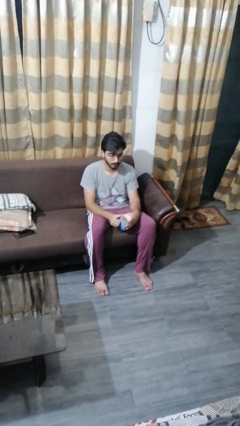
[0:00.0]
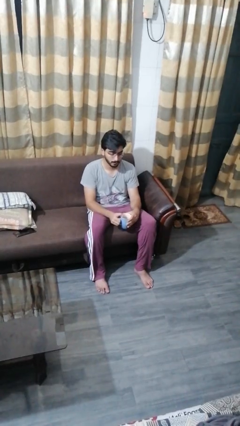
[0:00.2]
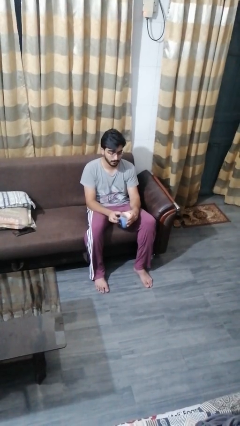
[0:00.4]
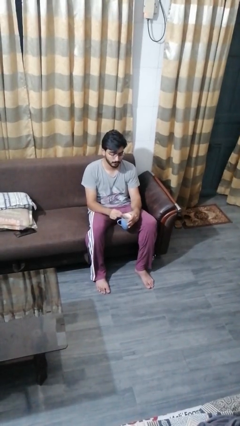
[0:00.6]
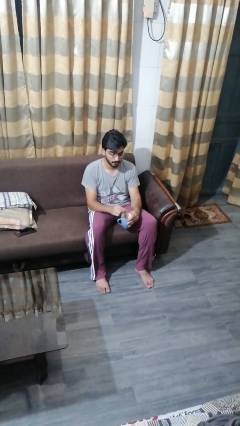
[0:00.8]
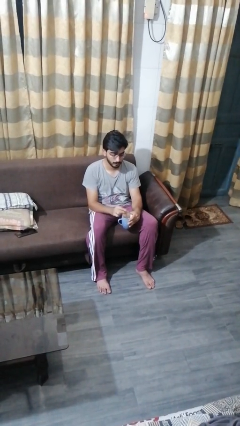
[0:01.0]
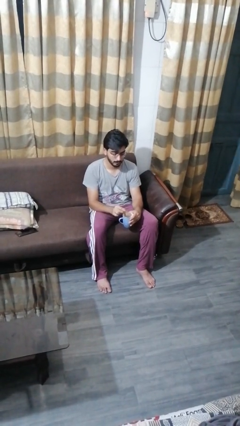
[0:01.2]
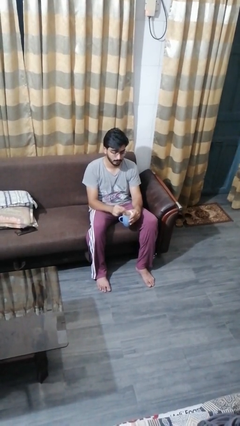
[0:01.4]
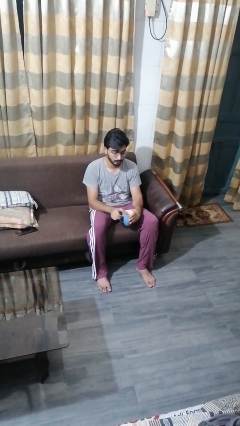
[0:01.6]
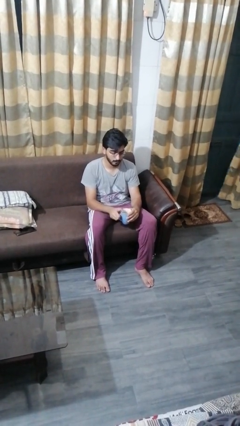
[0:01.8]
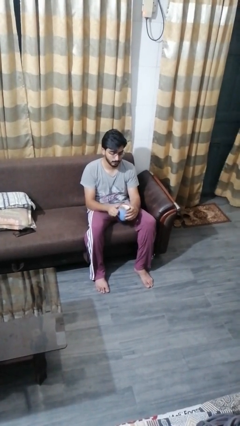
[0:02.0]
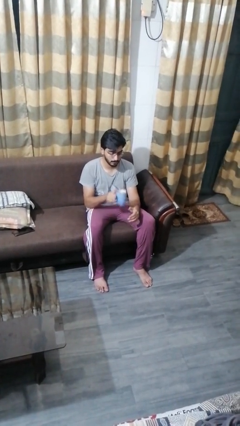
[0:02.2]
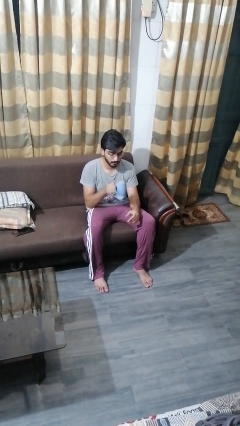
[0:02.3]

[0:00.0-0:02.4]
person stirs mug

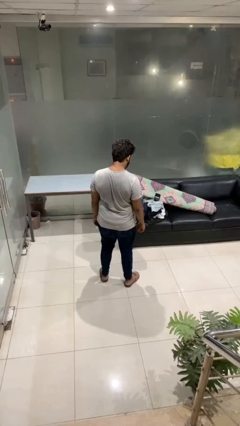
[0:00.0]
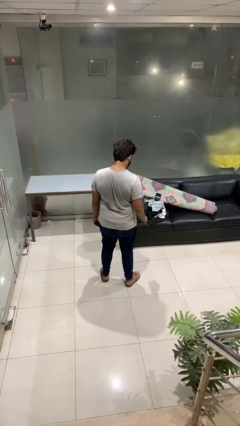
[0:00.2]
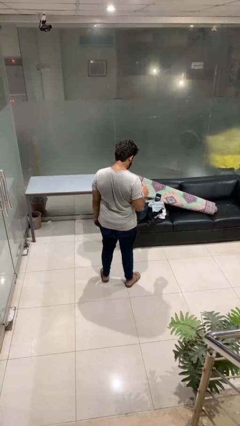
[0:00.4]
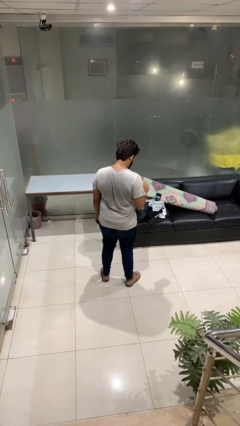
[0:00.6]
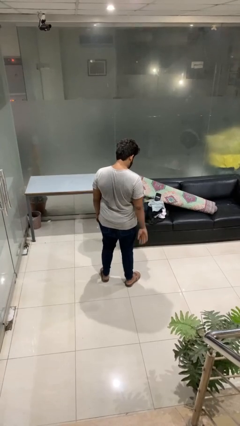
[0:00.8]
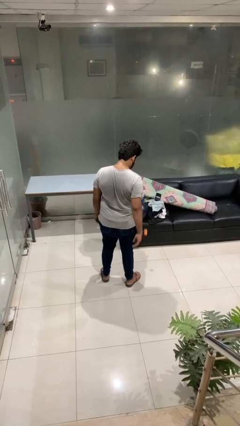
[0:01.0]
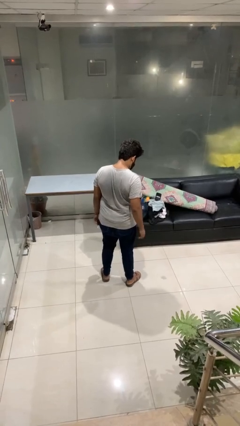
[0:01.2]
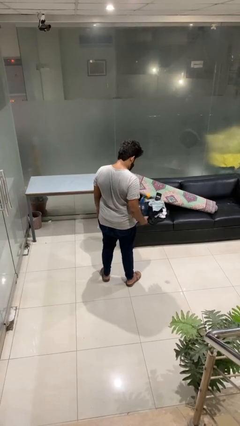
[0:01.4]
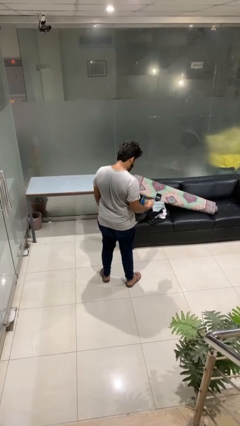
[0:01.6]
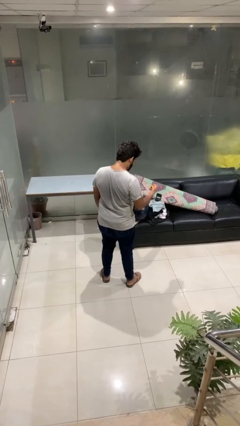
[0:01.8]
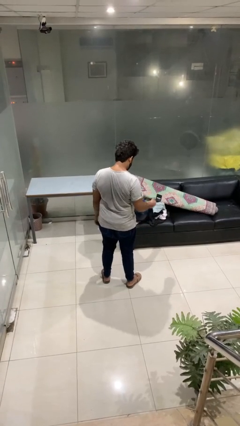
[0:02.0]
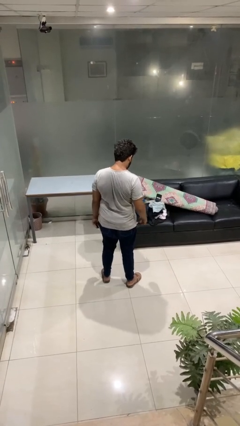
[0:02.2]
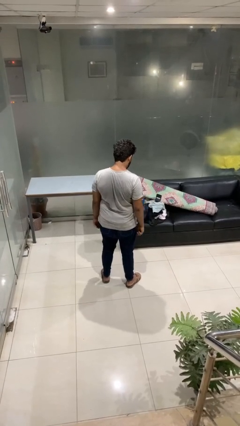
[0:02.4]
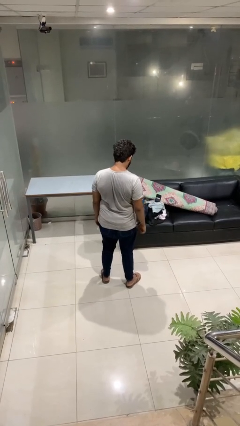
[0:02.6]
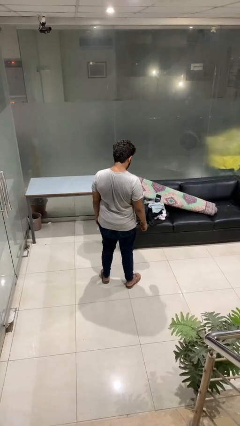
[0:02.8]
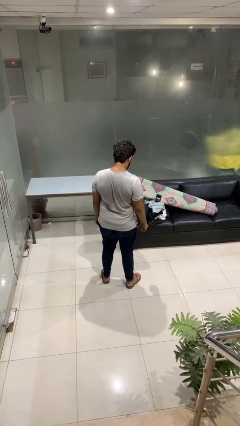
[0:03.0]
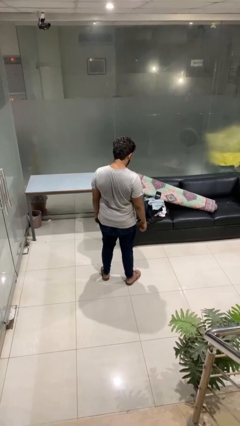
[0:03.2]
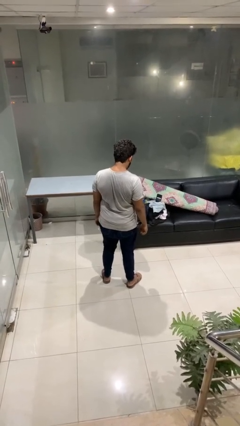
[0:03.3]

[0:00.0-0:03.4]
person bounces ball on floor

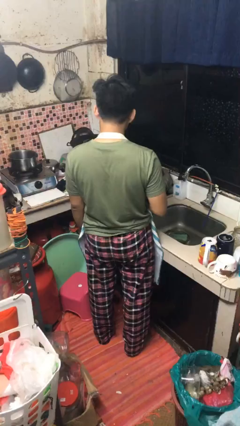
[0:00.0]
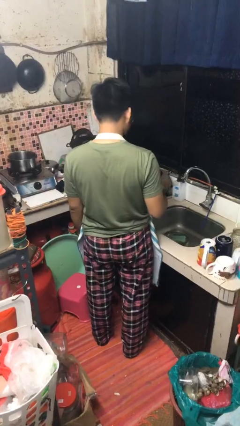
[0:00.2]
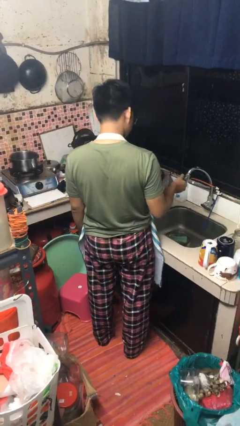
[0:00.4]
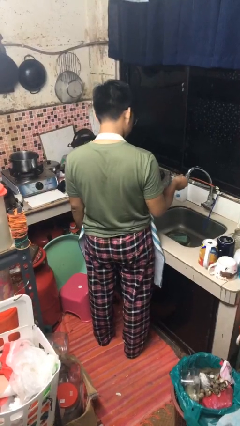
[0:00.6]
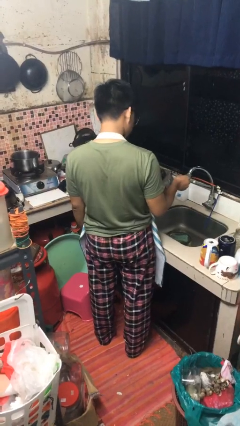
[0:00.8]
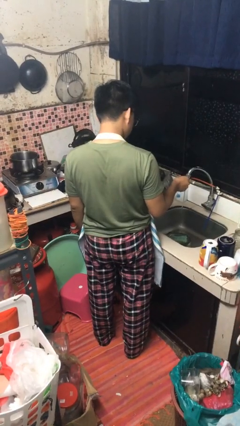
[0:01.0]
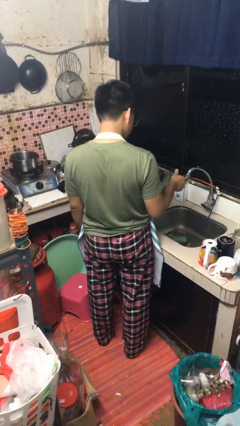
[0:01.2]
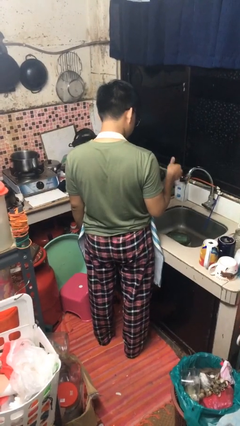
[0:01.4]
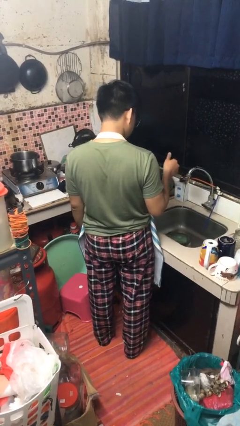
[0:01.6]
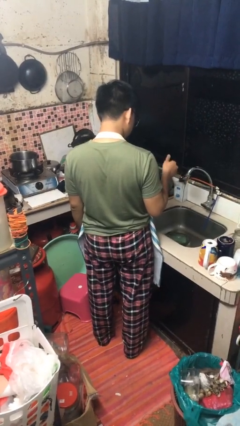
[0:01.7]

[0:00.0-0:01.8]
person turns on faucet

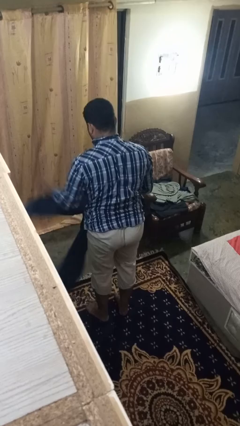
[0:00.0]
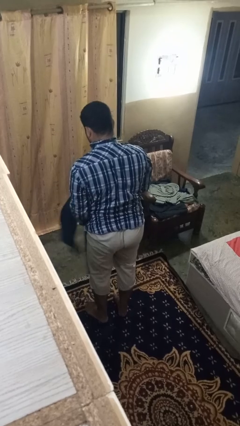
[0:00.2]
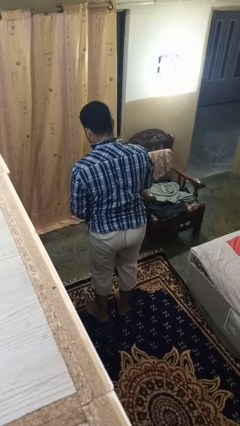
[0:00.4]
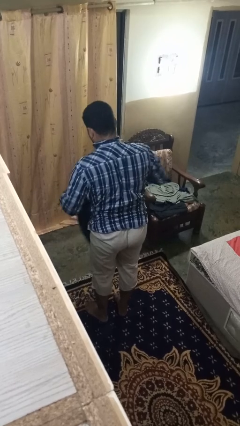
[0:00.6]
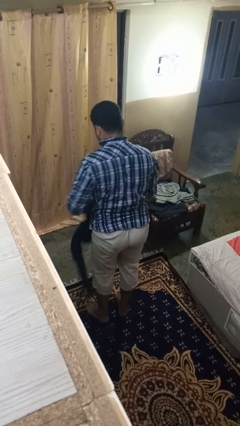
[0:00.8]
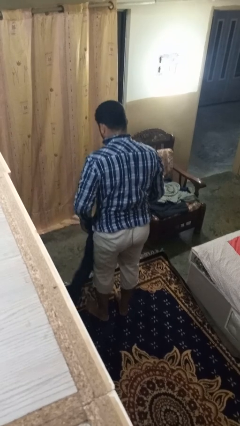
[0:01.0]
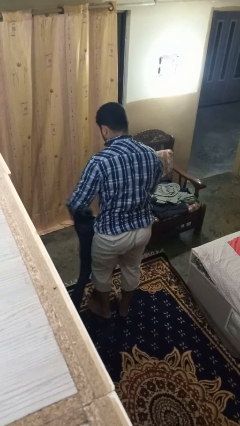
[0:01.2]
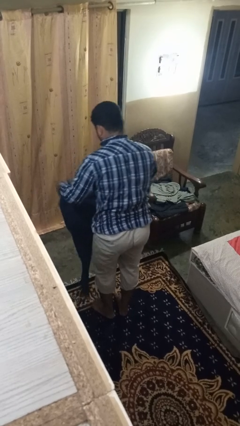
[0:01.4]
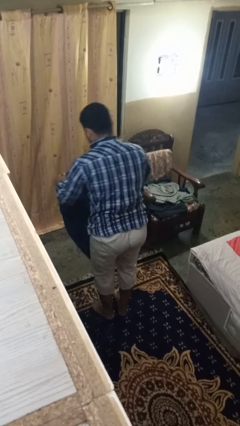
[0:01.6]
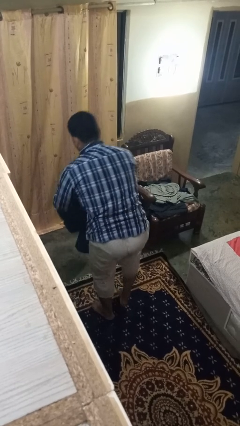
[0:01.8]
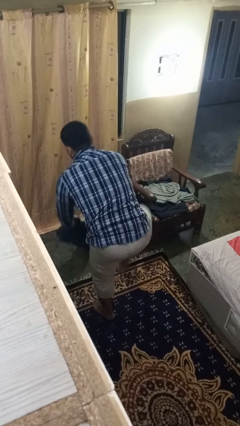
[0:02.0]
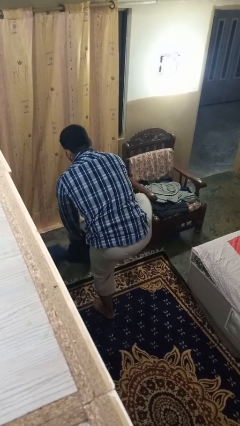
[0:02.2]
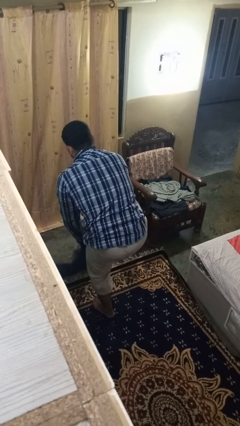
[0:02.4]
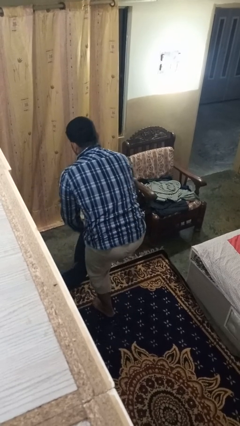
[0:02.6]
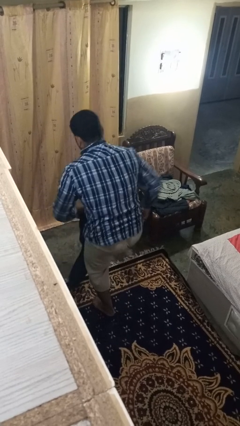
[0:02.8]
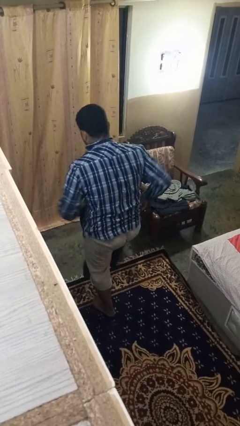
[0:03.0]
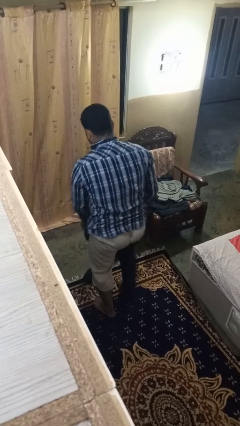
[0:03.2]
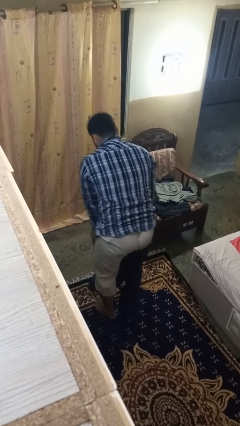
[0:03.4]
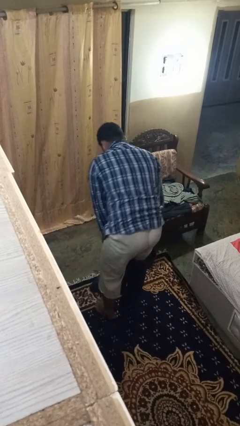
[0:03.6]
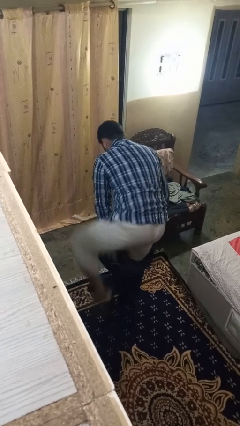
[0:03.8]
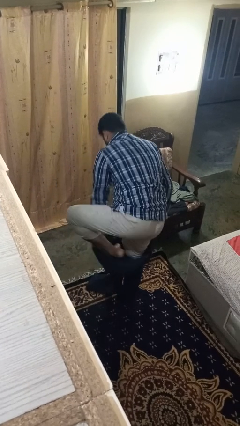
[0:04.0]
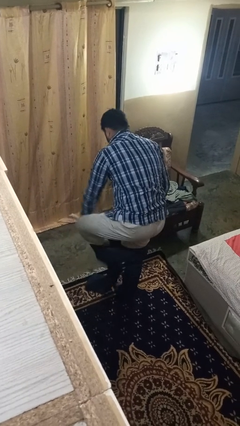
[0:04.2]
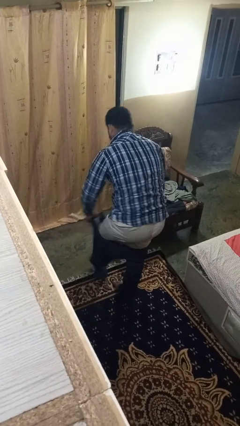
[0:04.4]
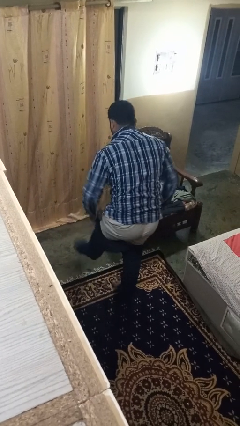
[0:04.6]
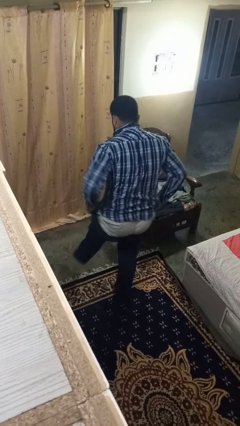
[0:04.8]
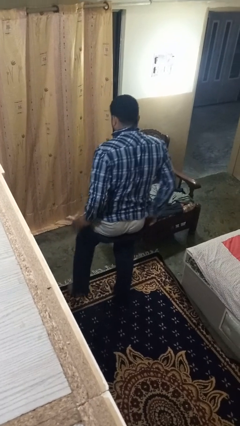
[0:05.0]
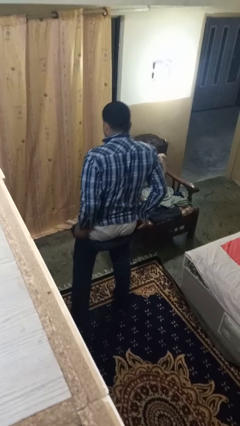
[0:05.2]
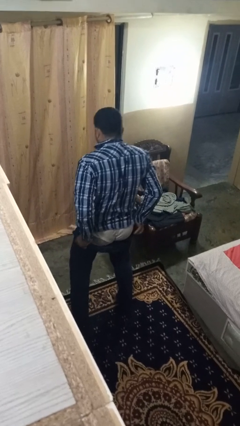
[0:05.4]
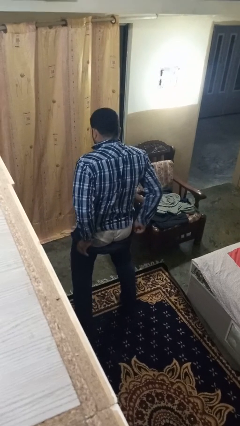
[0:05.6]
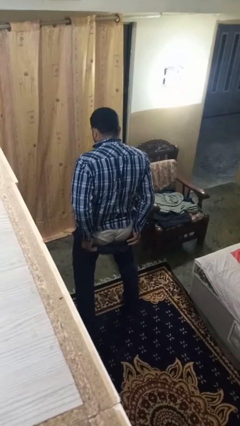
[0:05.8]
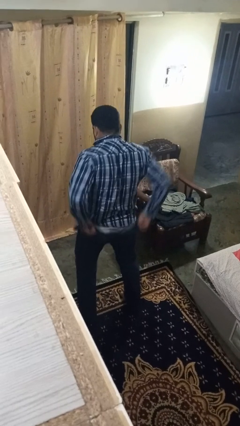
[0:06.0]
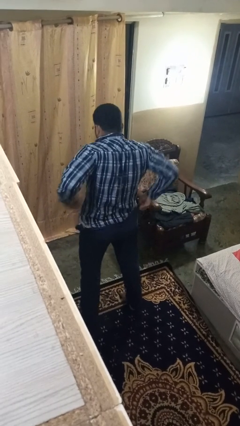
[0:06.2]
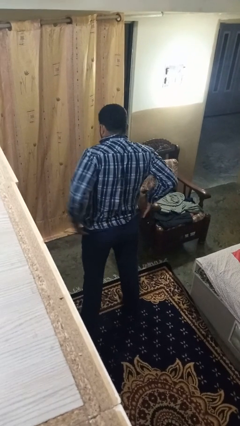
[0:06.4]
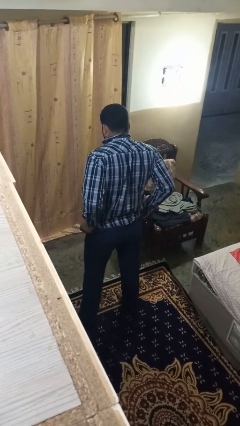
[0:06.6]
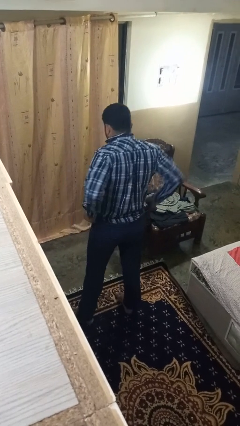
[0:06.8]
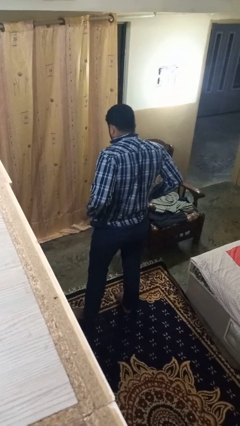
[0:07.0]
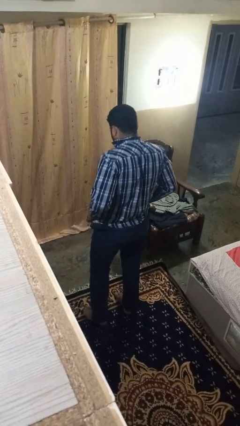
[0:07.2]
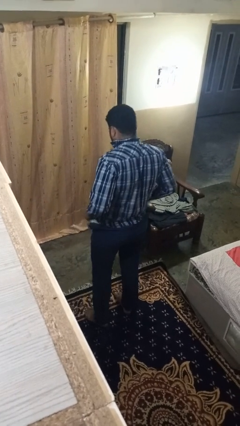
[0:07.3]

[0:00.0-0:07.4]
person puts on pants

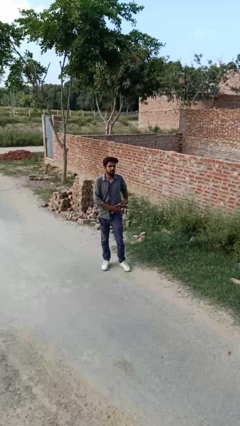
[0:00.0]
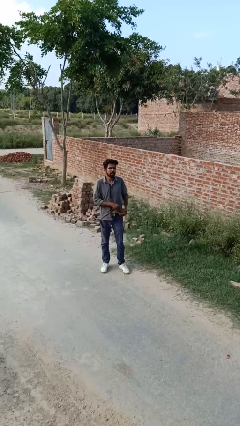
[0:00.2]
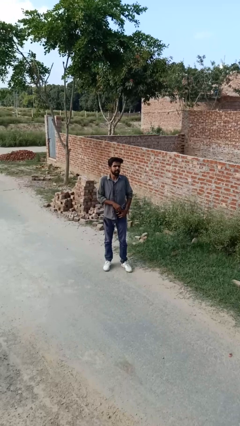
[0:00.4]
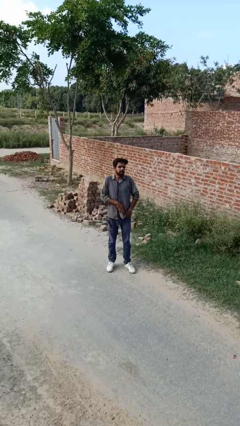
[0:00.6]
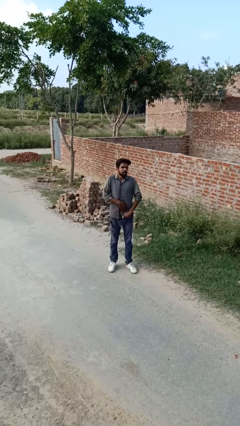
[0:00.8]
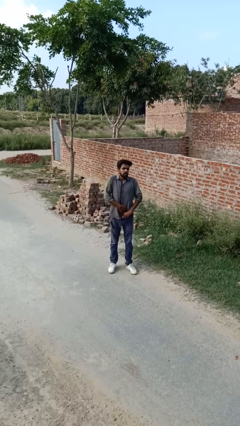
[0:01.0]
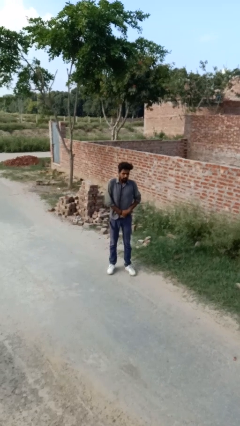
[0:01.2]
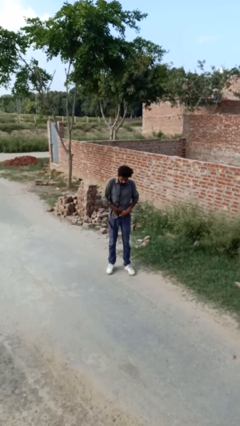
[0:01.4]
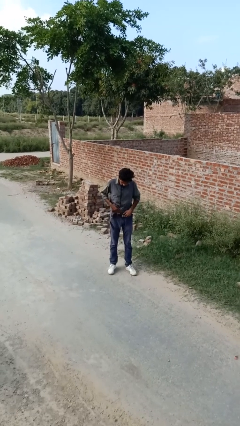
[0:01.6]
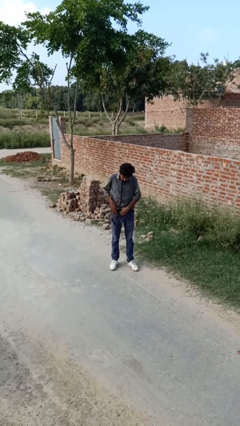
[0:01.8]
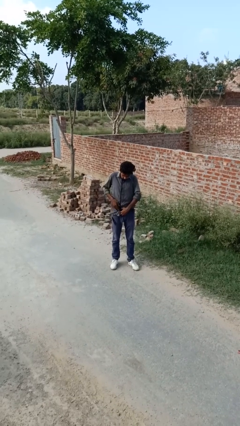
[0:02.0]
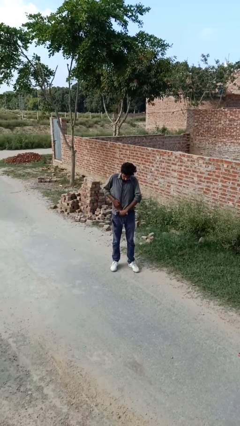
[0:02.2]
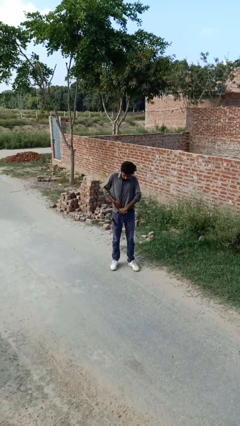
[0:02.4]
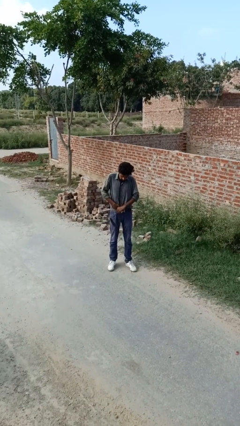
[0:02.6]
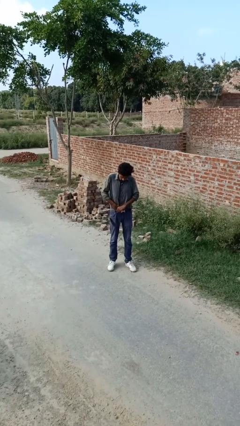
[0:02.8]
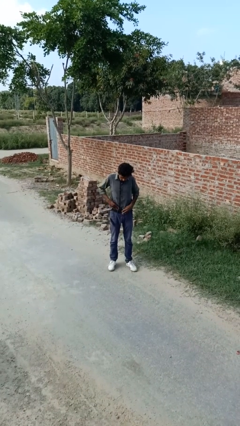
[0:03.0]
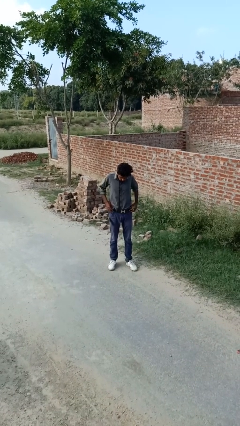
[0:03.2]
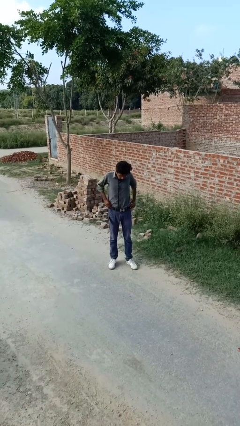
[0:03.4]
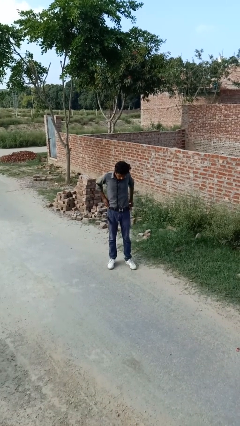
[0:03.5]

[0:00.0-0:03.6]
person tucks in shirt
